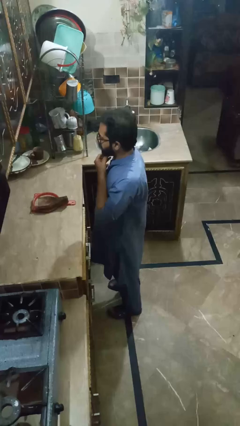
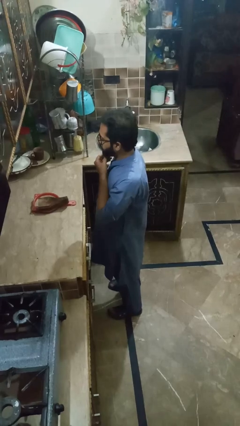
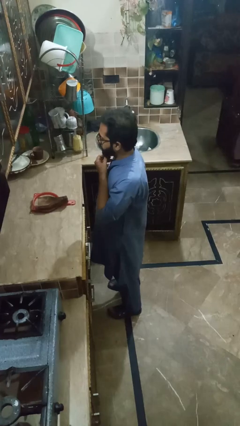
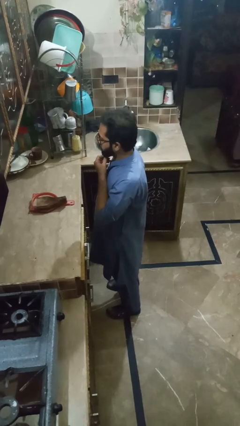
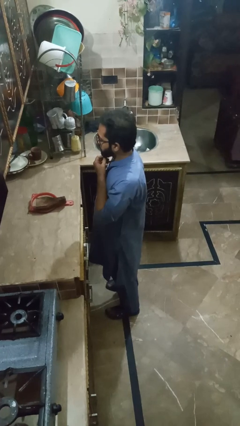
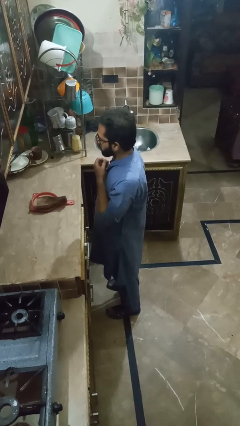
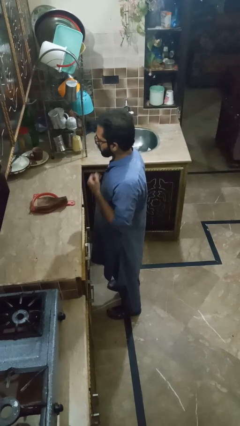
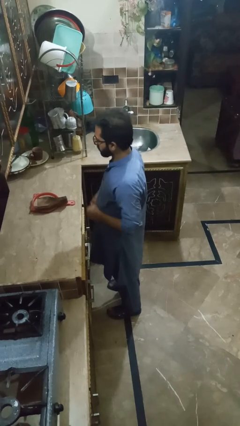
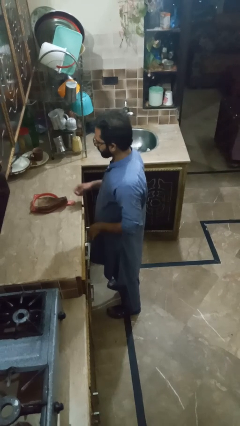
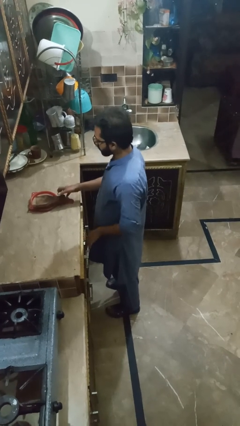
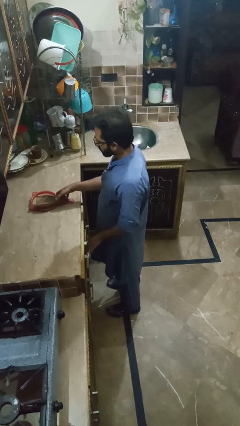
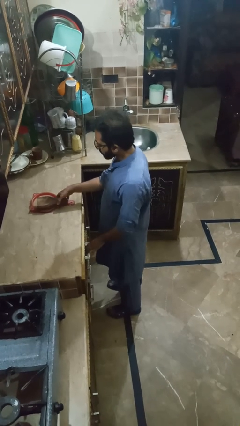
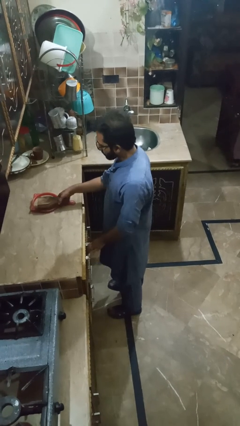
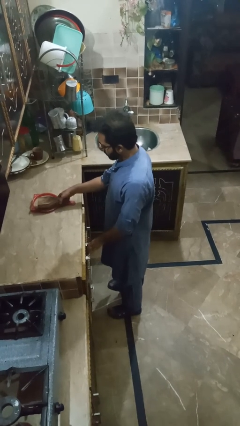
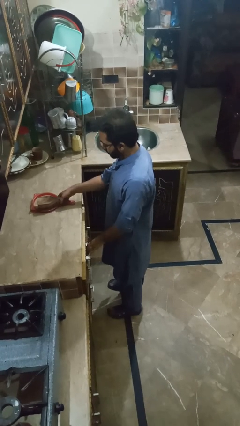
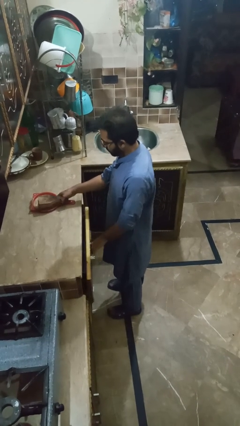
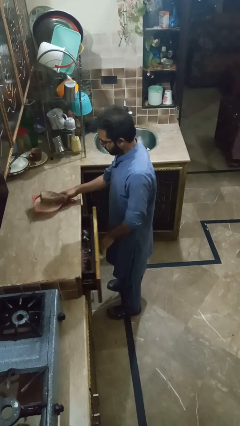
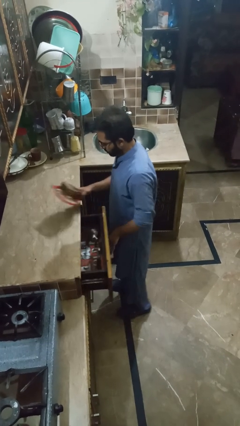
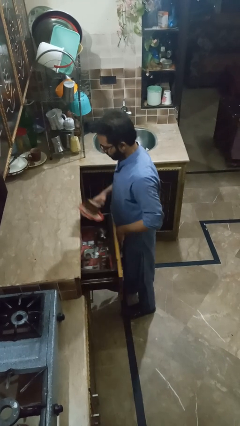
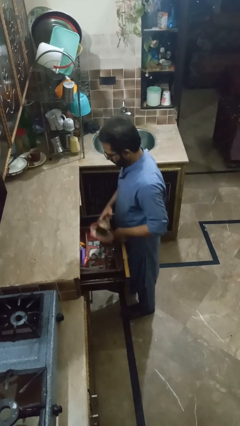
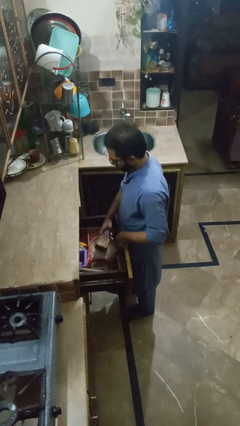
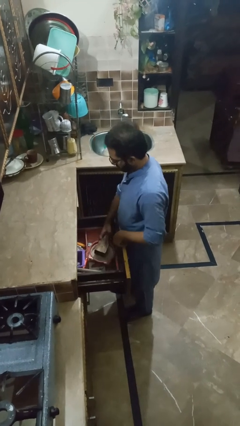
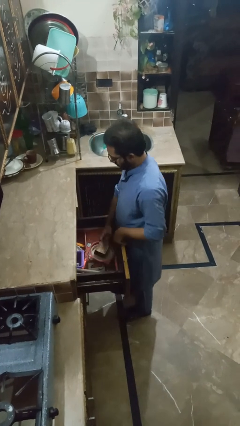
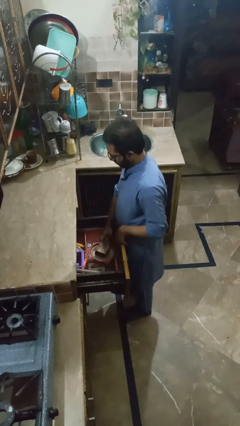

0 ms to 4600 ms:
person takes object from kitchen drawer

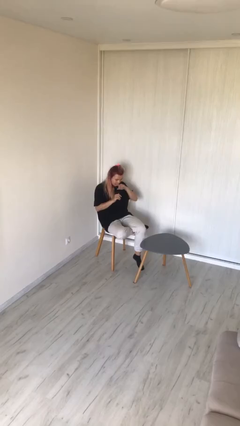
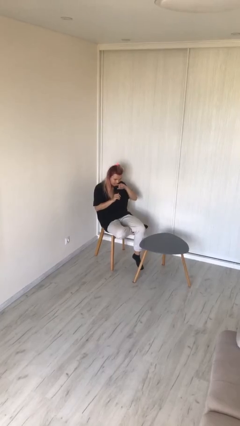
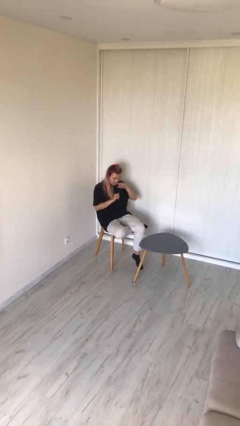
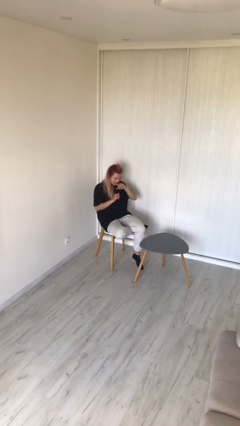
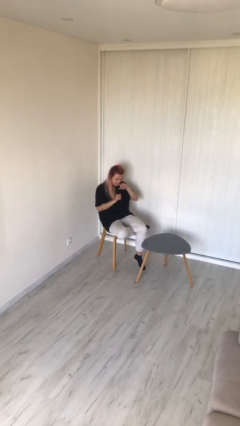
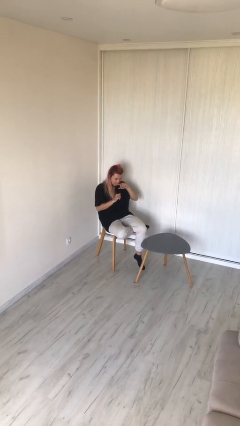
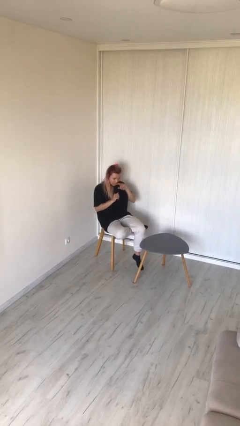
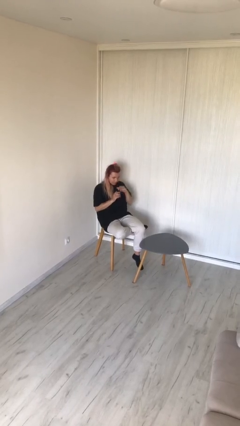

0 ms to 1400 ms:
person licks fingers

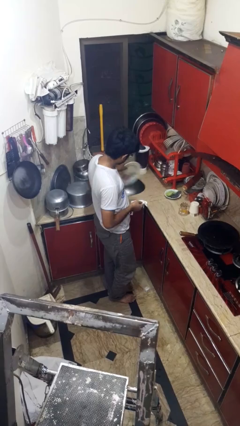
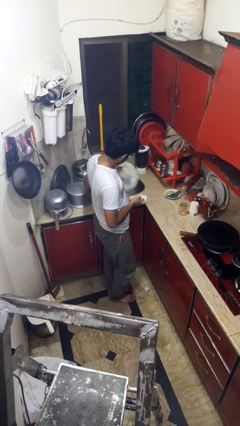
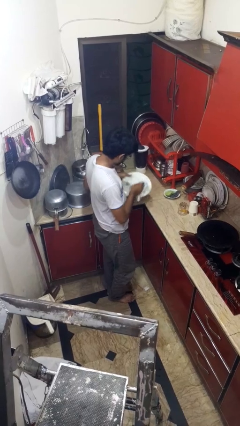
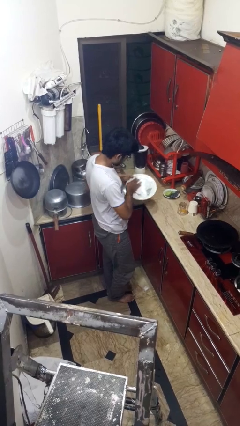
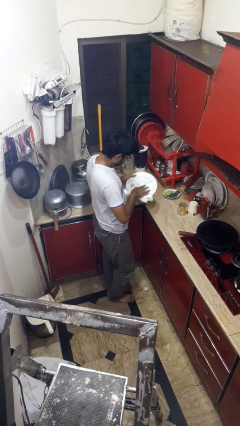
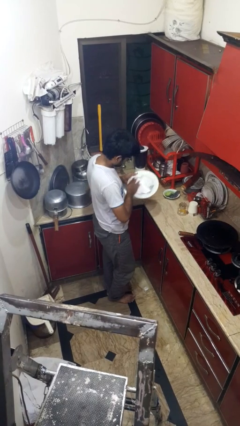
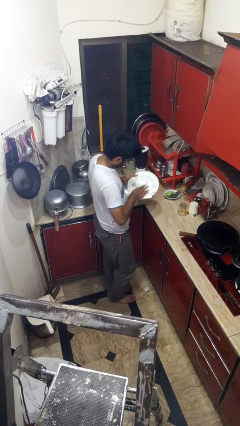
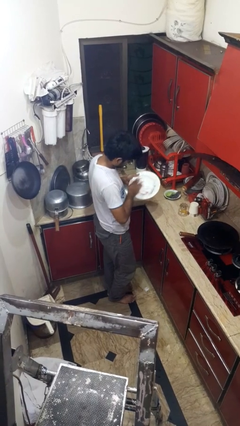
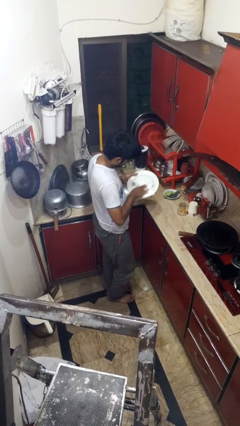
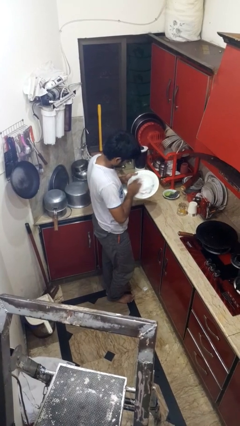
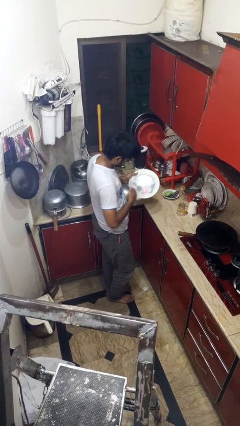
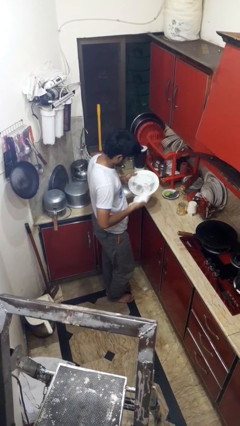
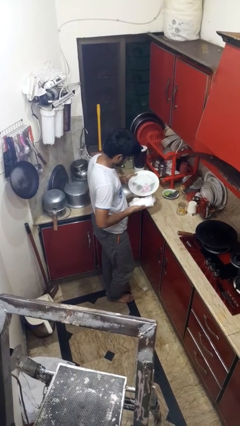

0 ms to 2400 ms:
person dries dish

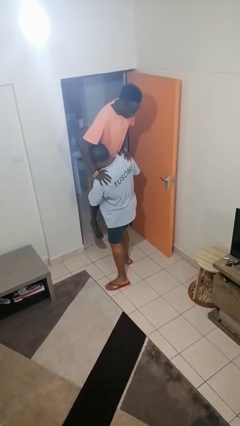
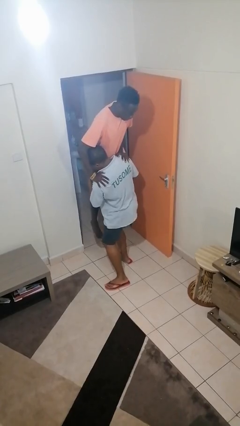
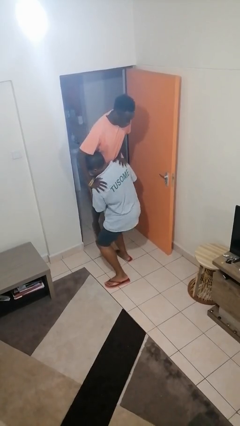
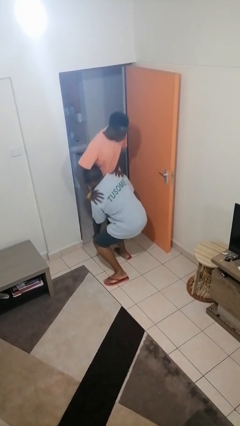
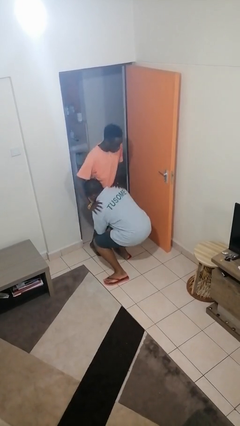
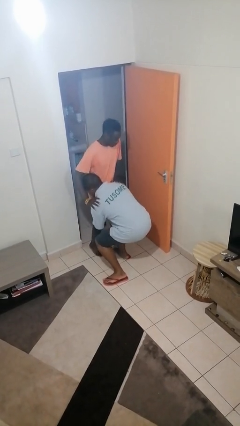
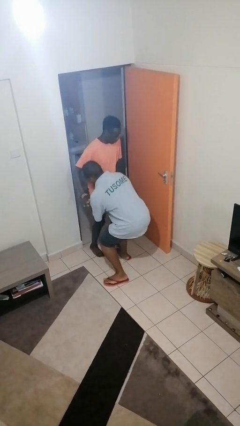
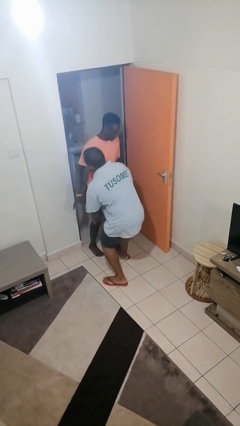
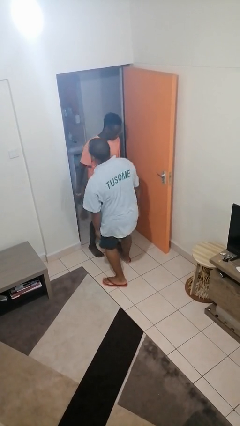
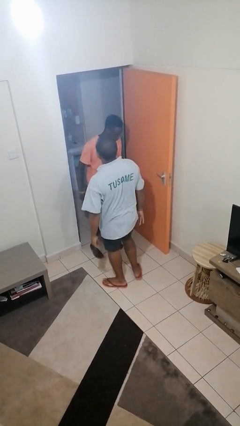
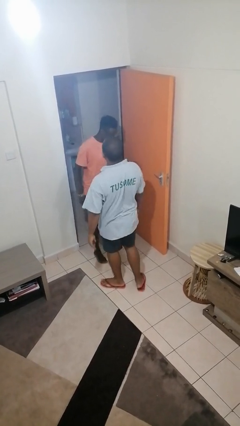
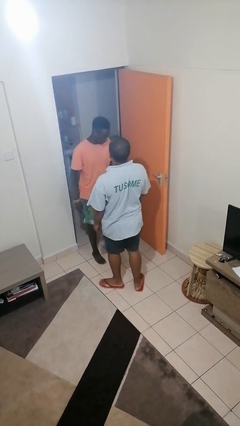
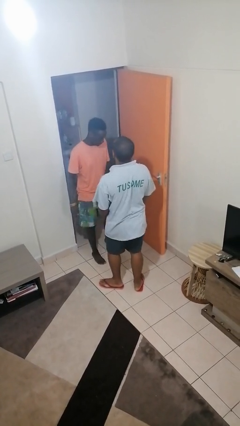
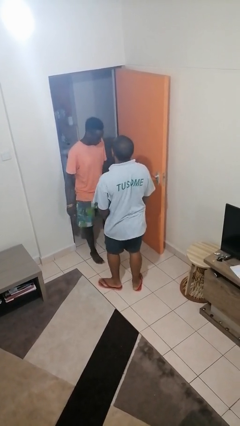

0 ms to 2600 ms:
person puts down person

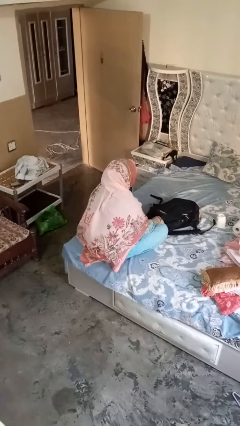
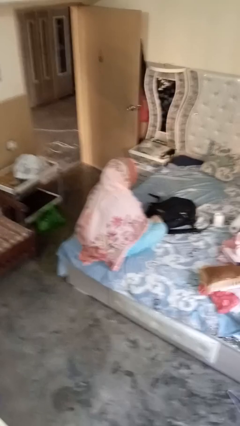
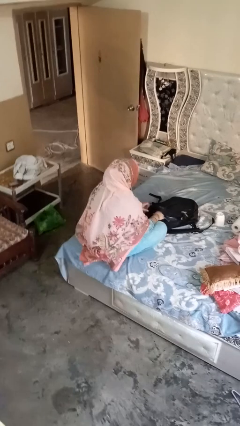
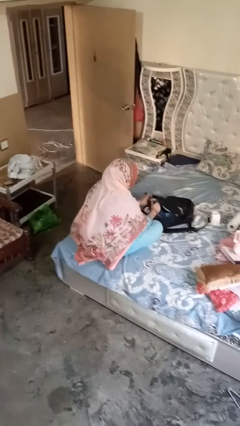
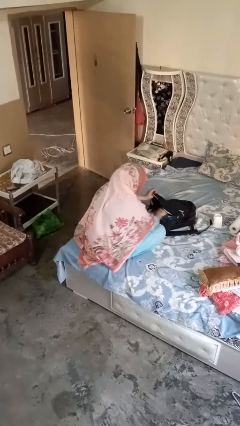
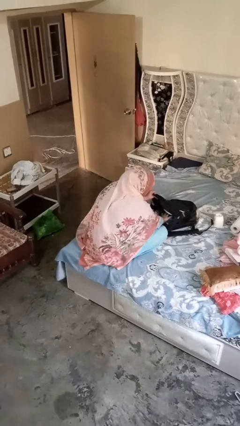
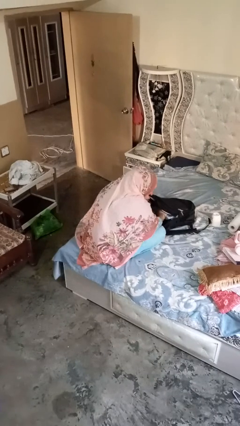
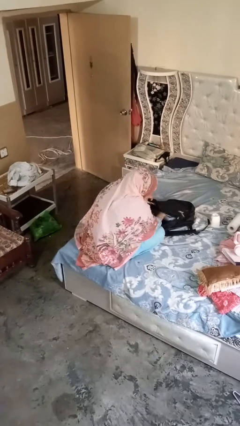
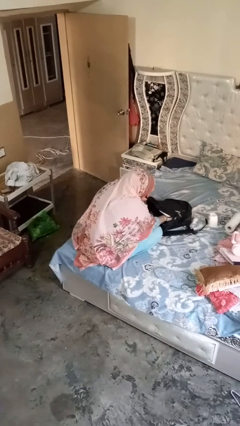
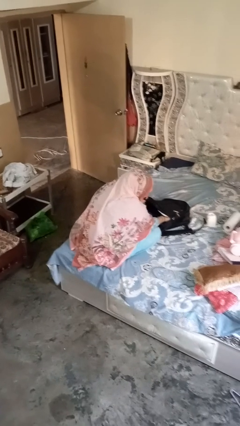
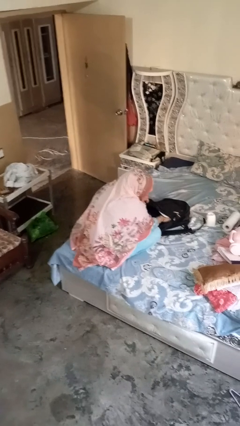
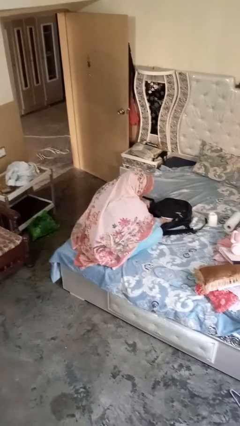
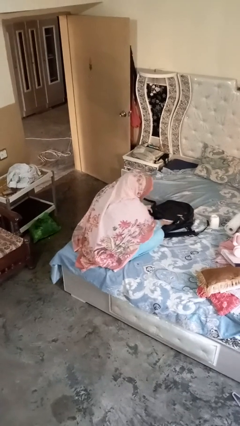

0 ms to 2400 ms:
person searches in bag

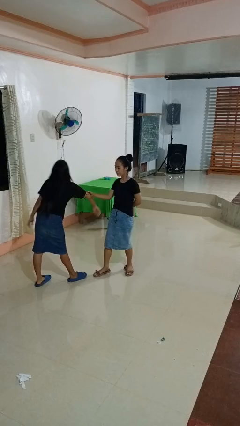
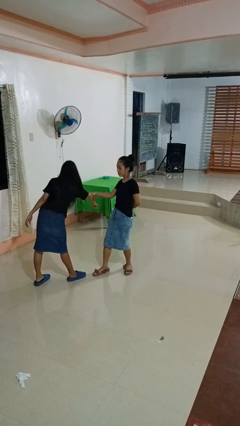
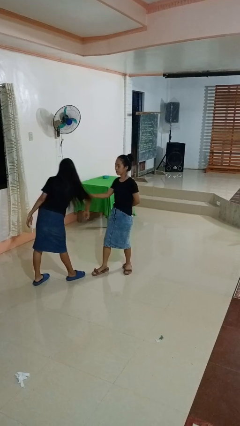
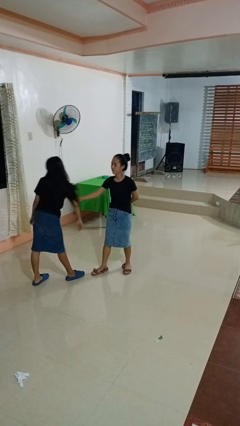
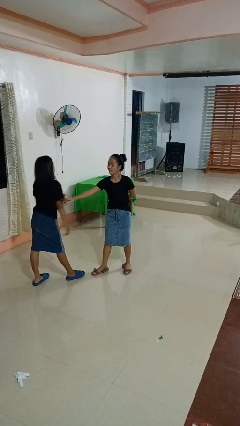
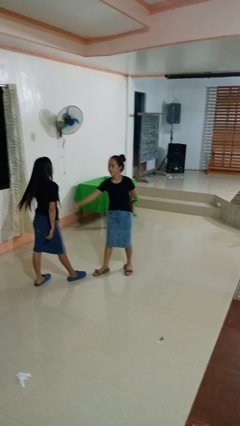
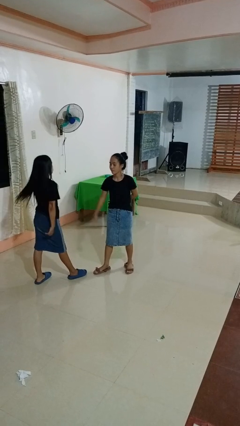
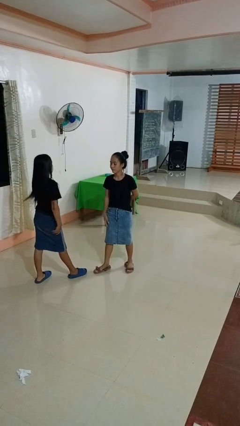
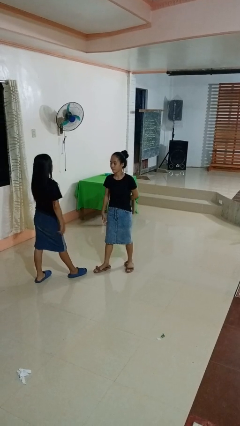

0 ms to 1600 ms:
person grabs person by bicep

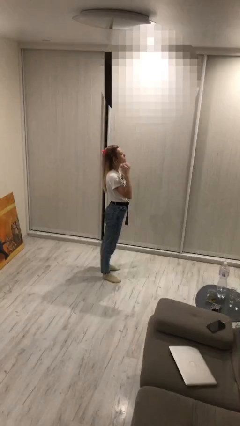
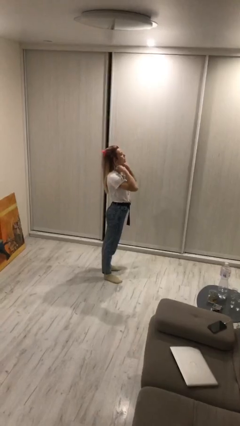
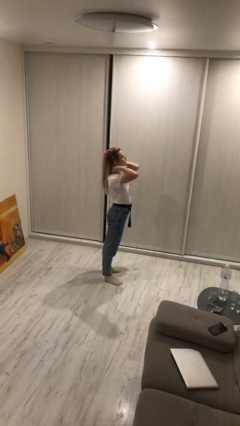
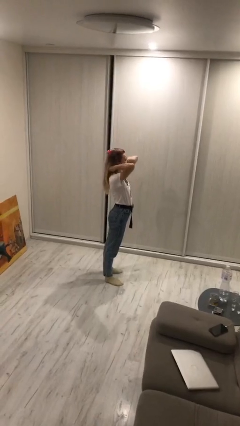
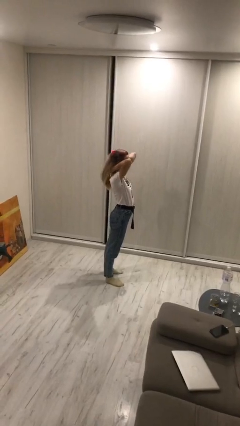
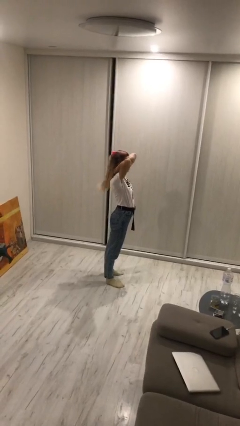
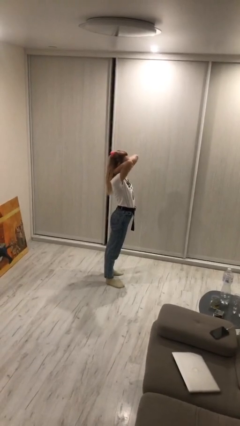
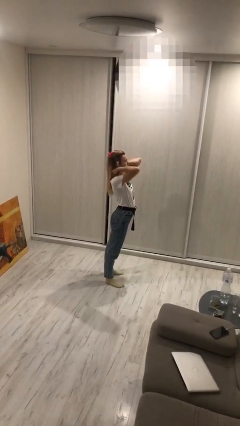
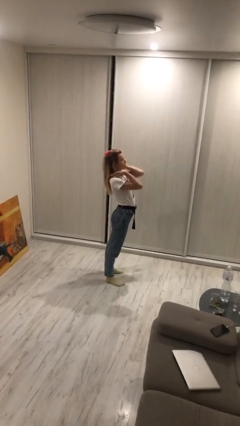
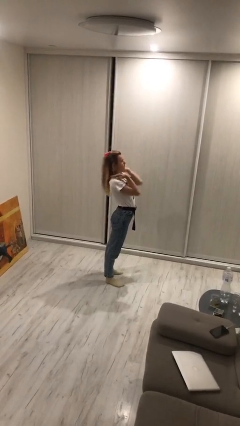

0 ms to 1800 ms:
person puts on necklace
